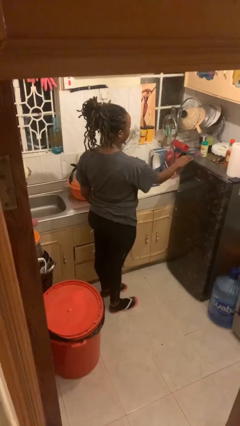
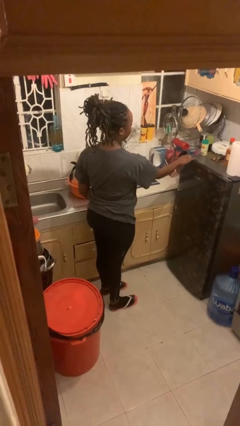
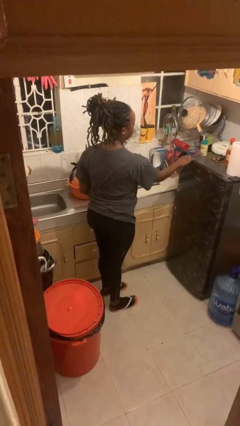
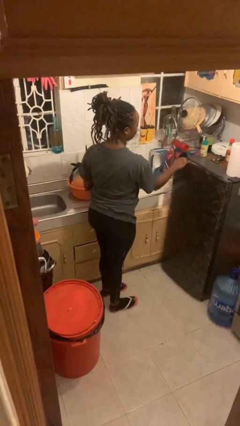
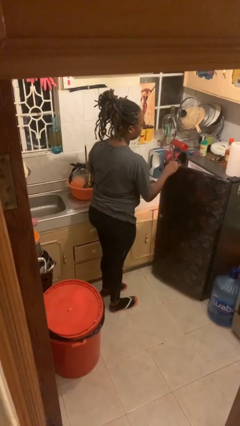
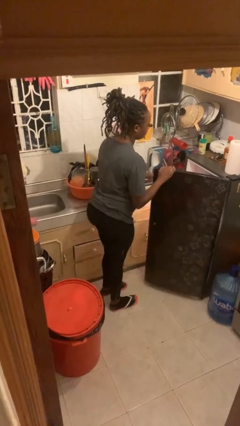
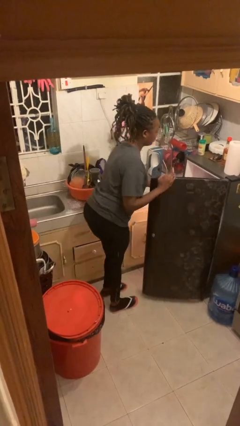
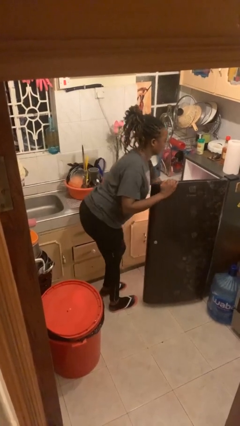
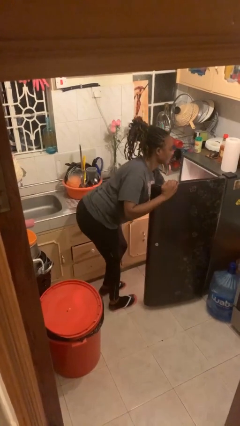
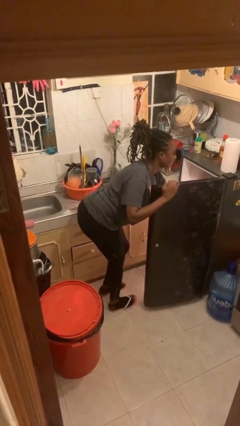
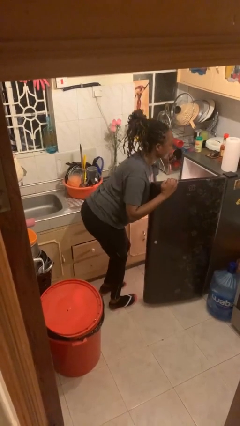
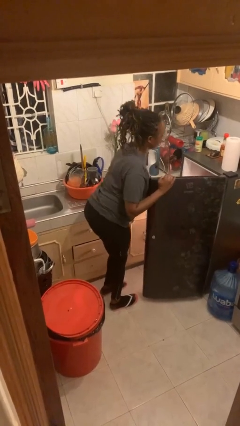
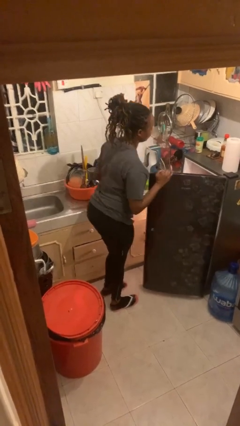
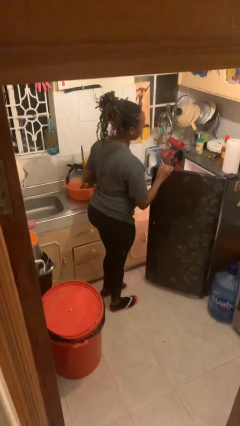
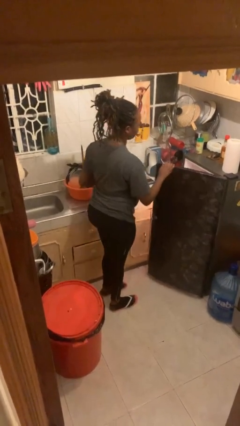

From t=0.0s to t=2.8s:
person takes object from refrigerator

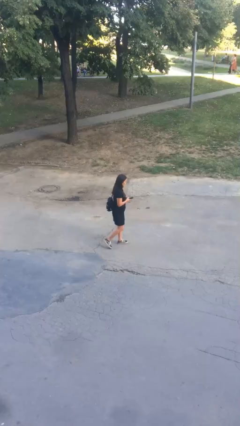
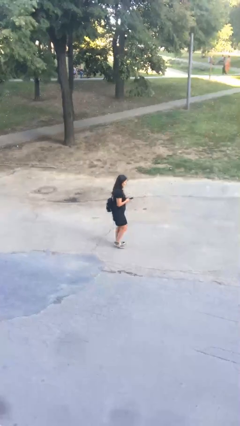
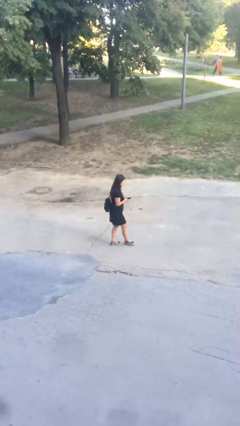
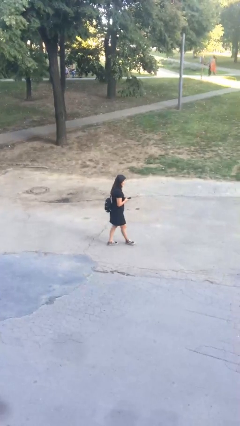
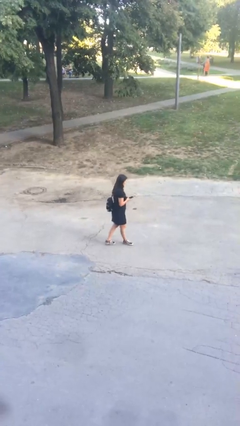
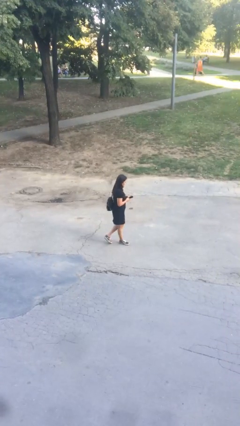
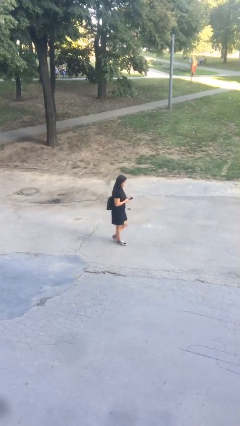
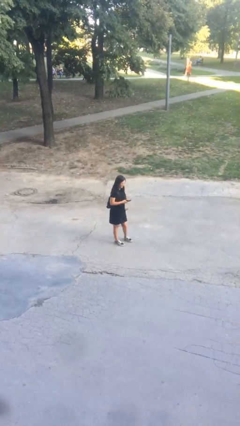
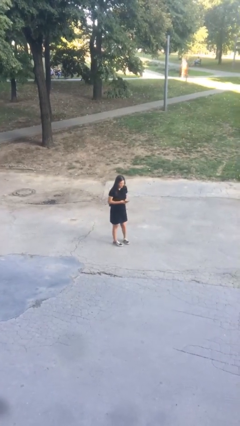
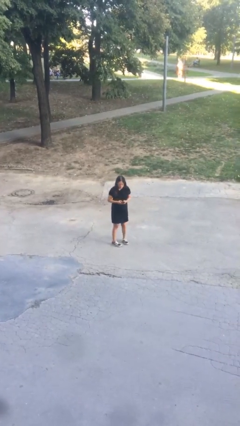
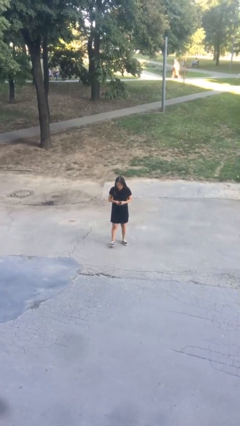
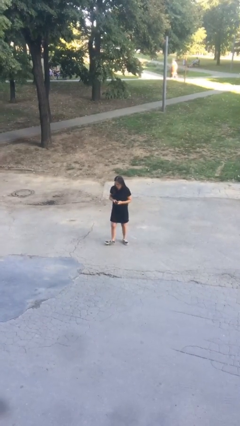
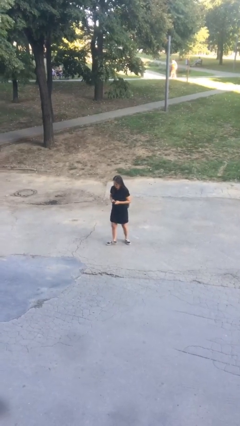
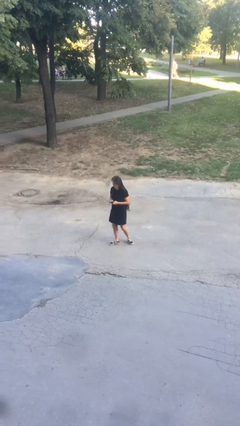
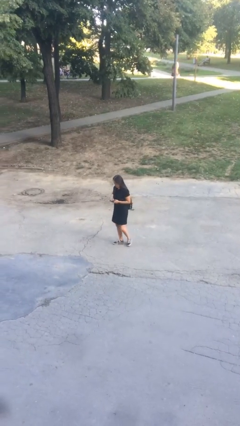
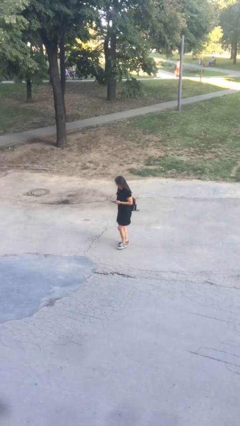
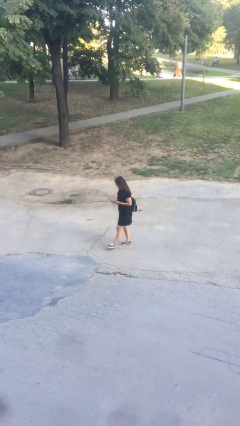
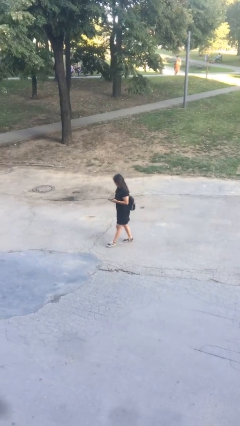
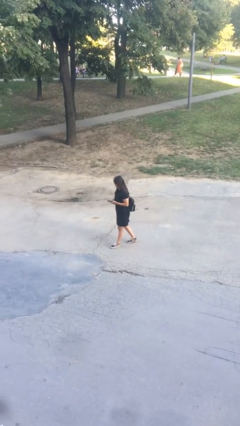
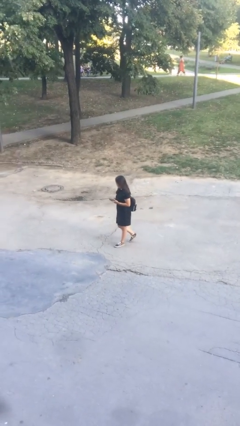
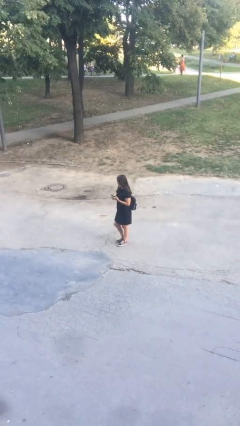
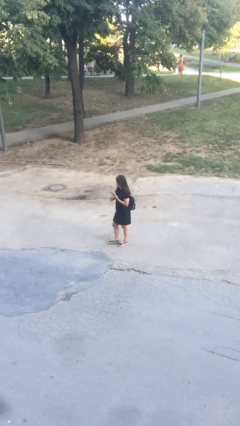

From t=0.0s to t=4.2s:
person texts on phone

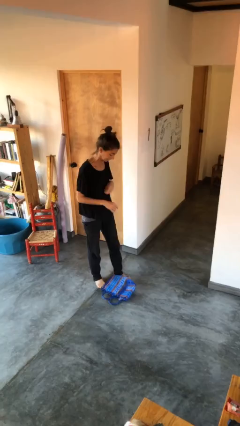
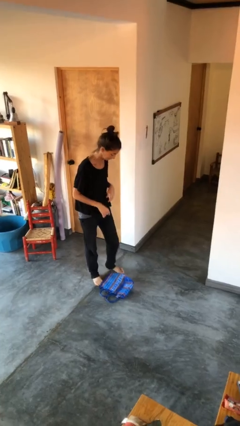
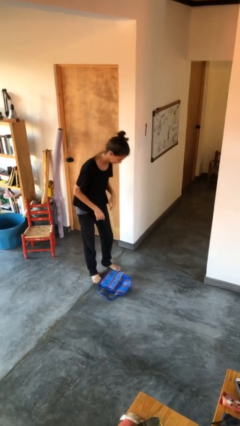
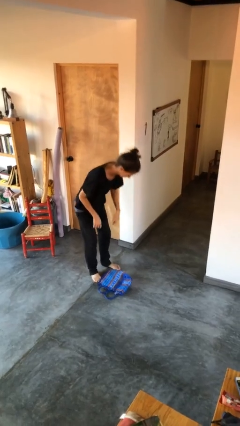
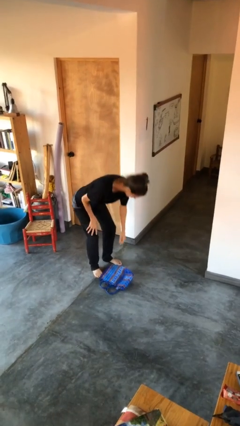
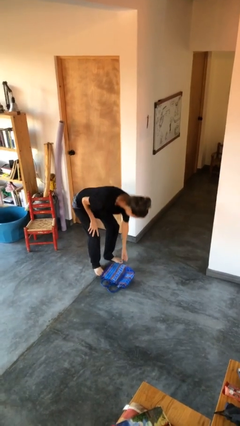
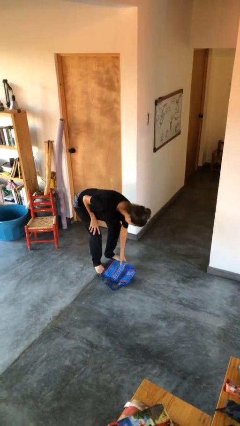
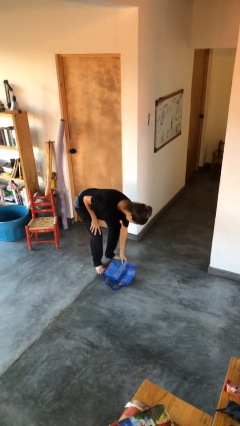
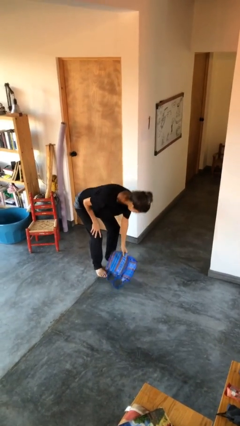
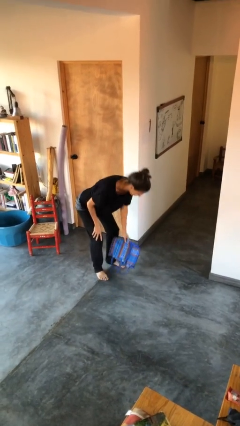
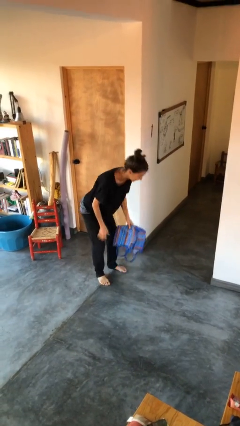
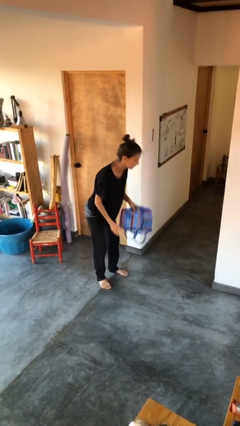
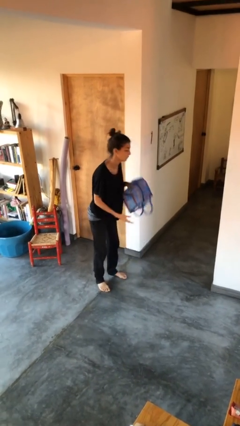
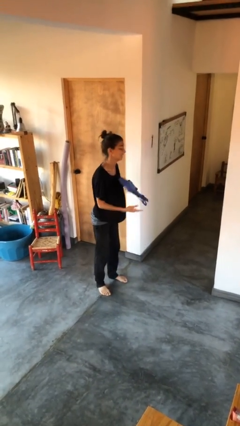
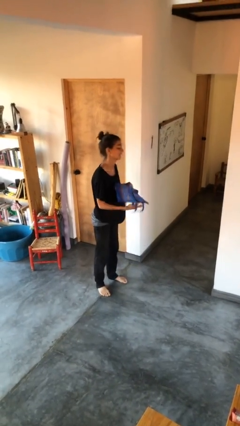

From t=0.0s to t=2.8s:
person picks up object from floor

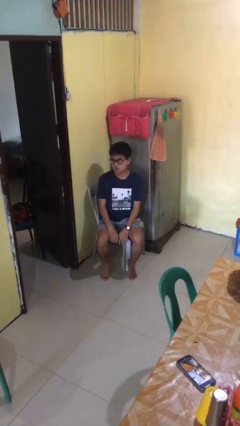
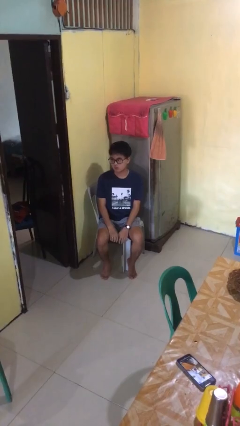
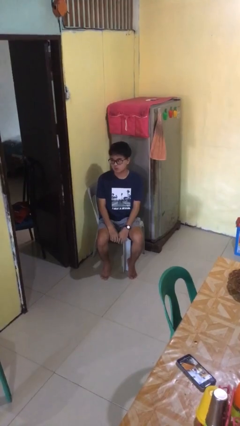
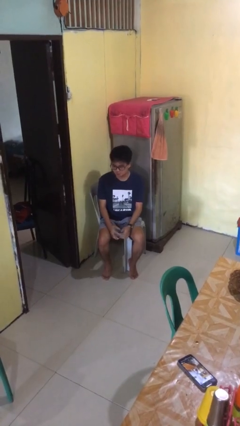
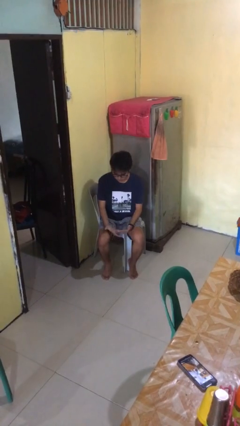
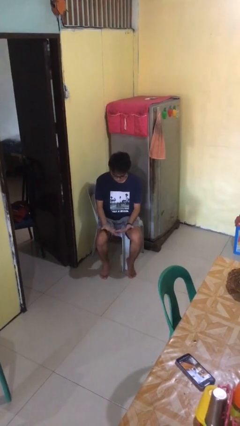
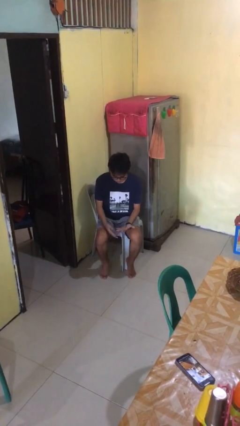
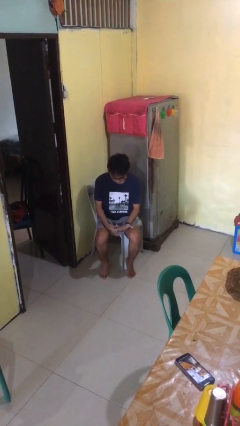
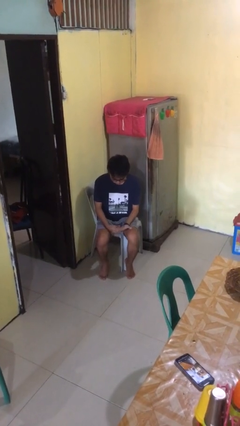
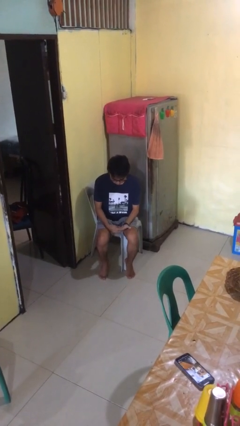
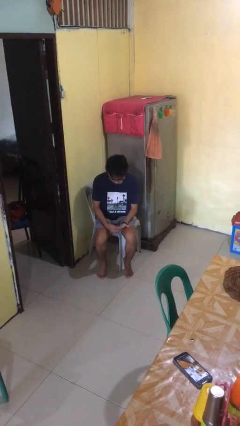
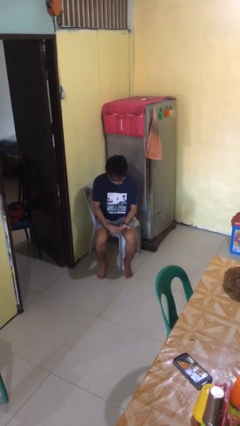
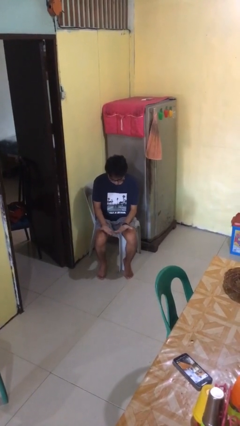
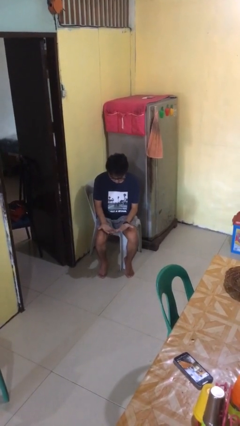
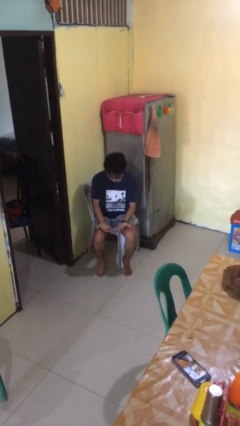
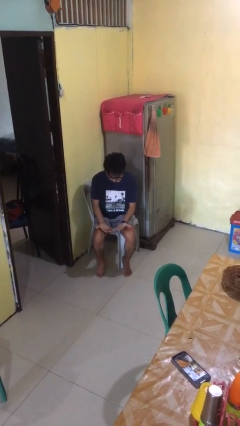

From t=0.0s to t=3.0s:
person looks at hands in lap

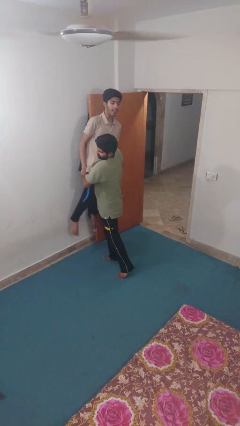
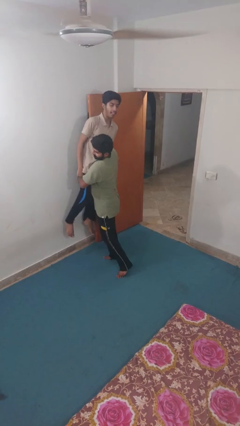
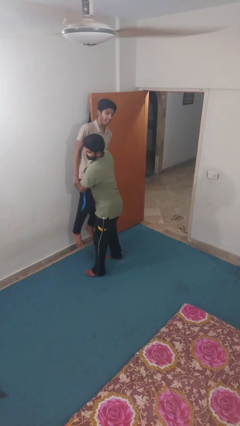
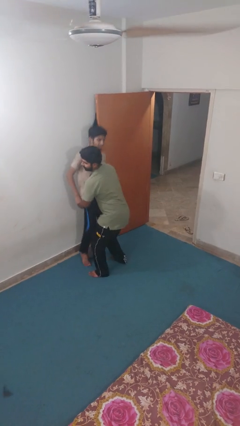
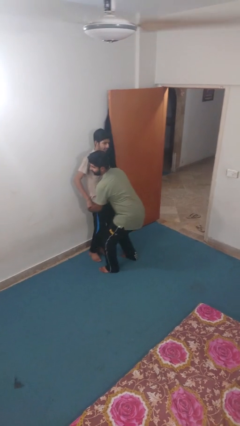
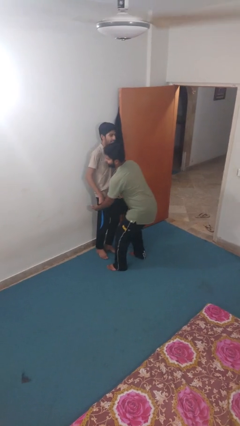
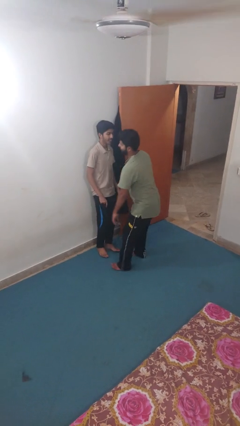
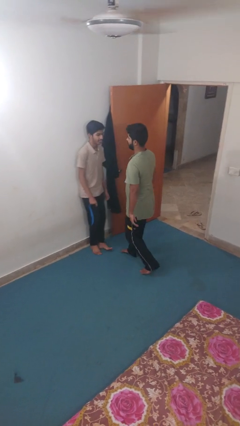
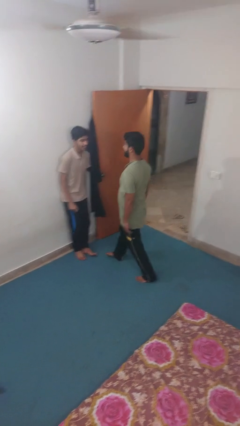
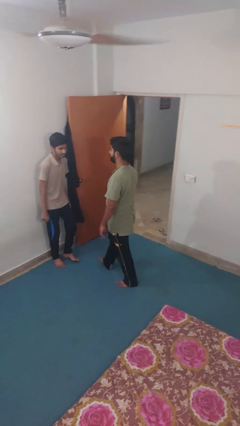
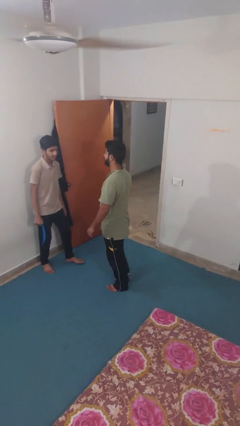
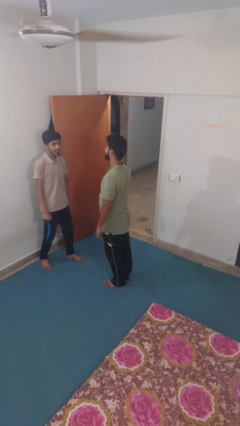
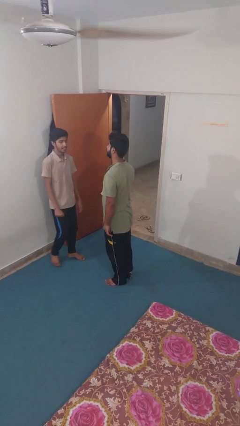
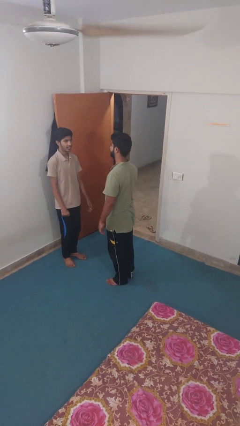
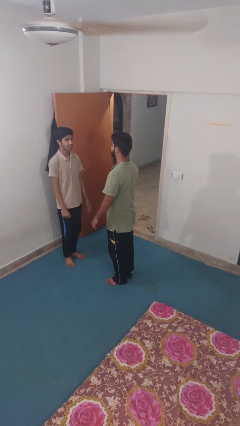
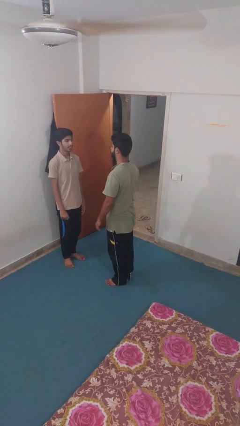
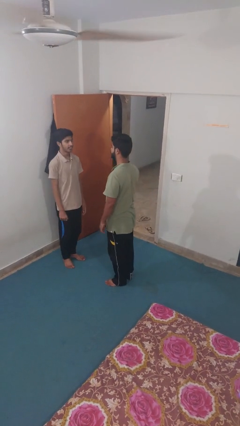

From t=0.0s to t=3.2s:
person puts down person

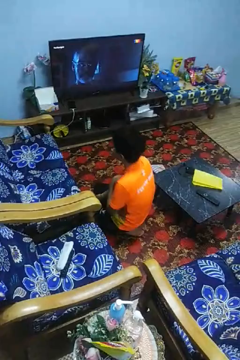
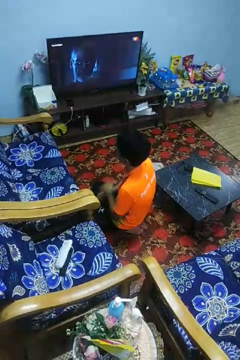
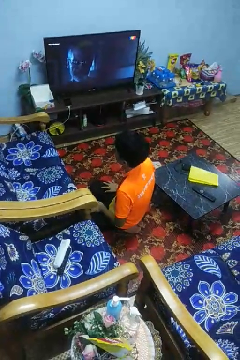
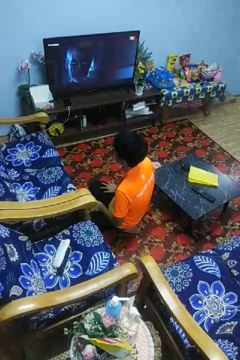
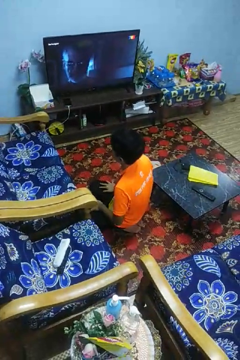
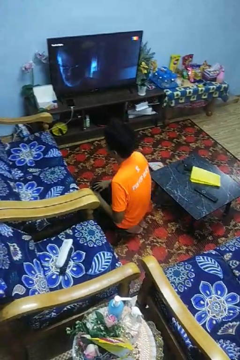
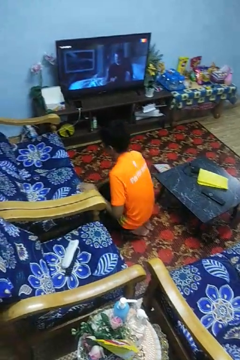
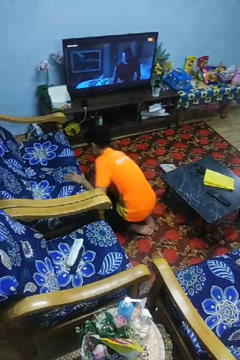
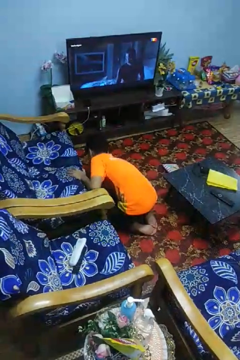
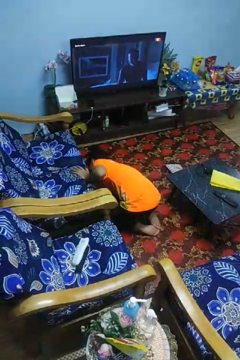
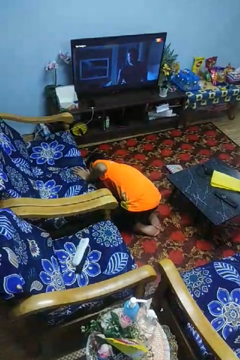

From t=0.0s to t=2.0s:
person searches under couch
